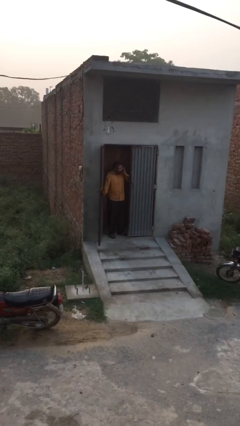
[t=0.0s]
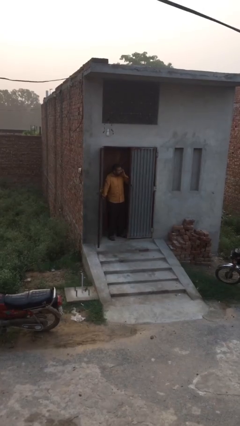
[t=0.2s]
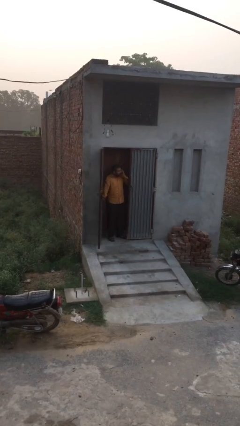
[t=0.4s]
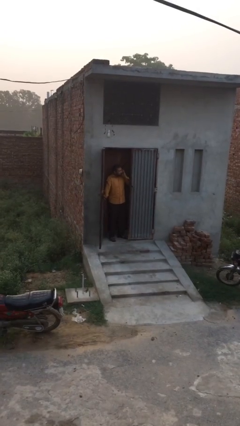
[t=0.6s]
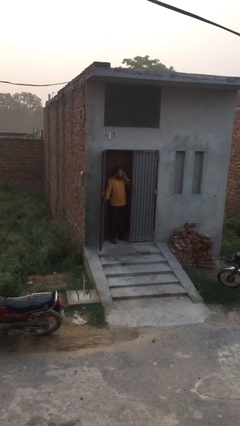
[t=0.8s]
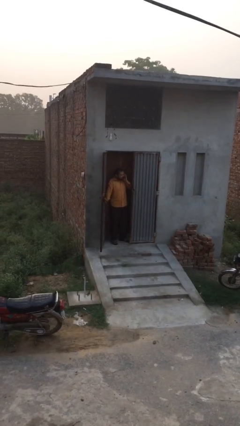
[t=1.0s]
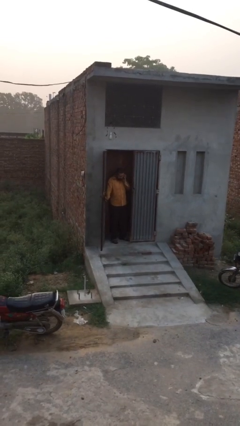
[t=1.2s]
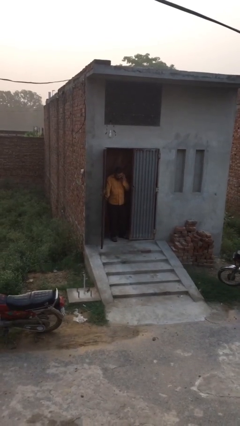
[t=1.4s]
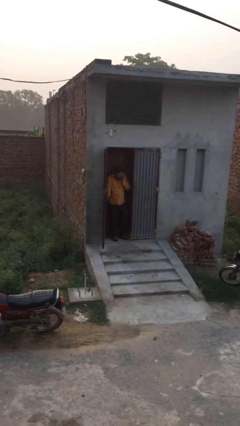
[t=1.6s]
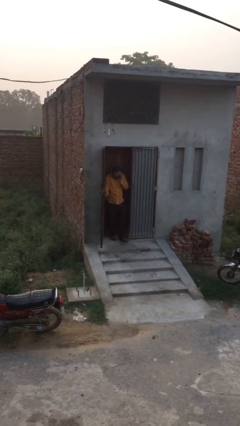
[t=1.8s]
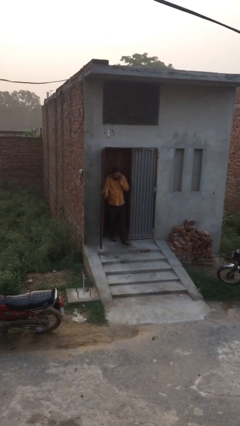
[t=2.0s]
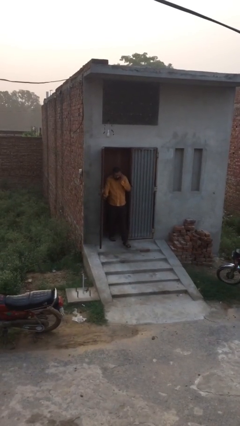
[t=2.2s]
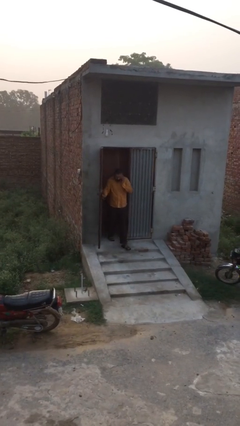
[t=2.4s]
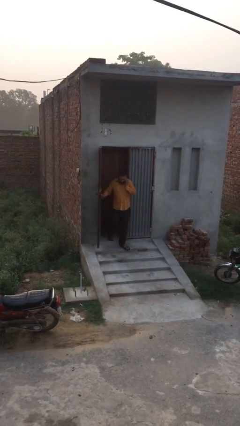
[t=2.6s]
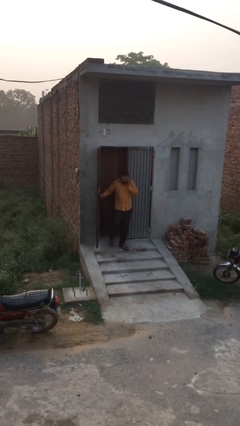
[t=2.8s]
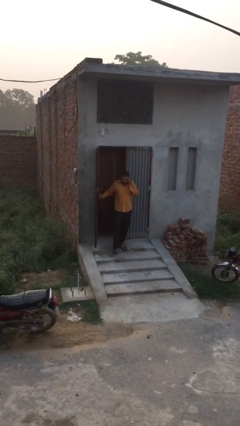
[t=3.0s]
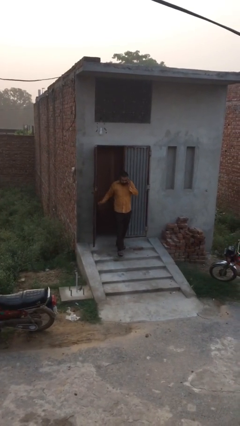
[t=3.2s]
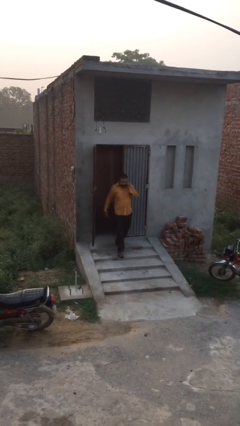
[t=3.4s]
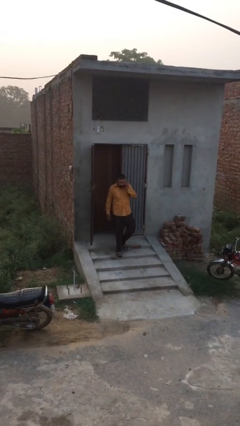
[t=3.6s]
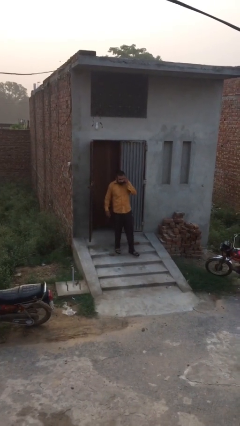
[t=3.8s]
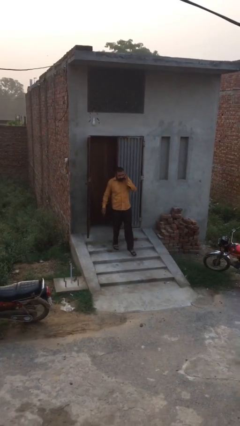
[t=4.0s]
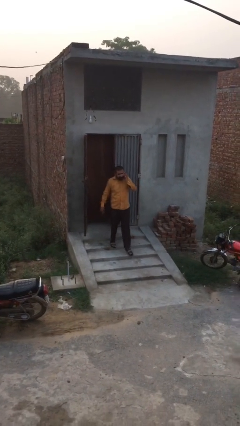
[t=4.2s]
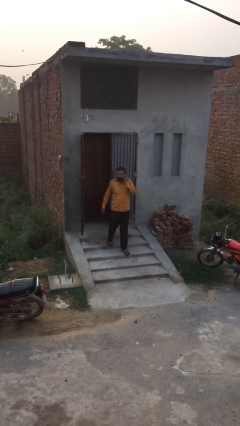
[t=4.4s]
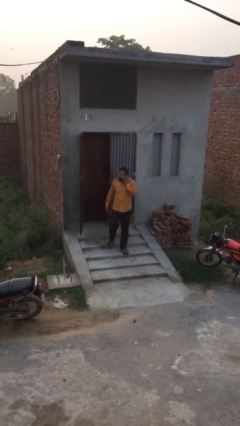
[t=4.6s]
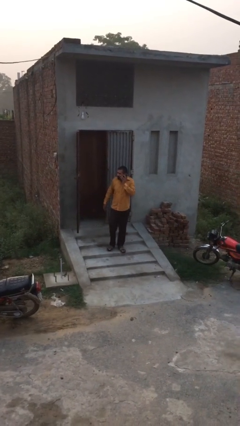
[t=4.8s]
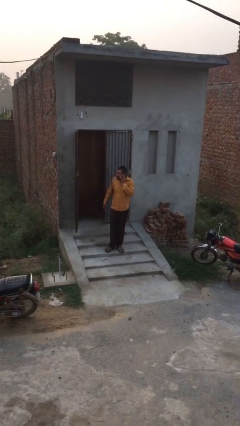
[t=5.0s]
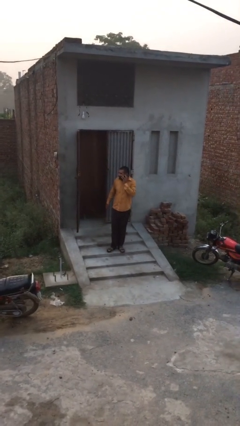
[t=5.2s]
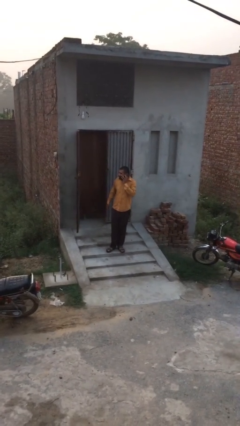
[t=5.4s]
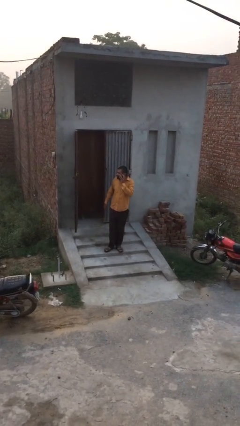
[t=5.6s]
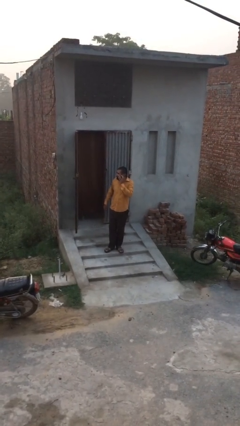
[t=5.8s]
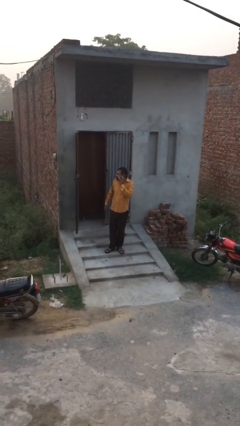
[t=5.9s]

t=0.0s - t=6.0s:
person enters scene through structure

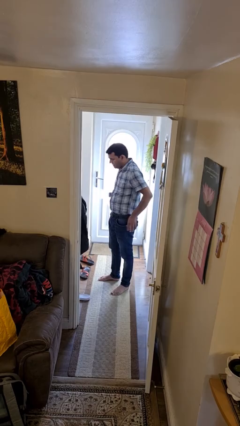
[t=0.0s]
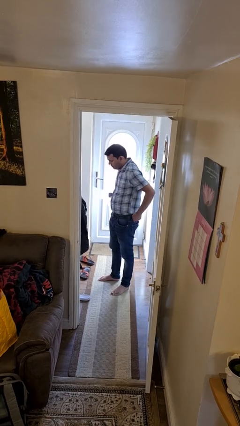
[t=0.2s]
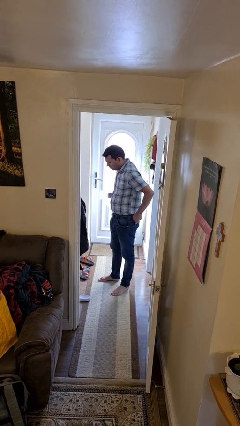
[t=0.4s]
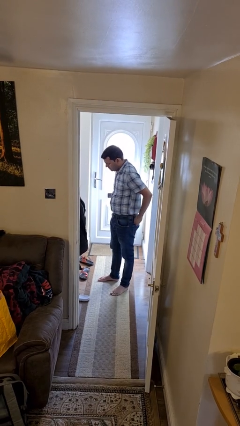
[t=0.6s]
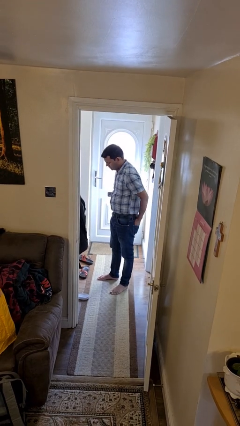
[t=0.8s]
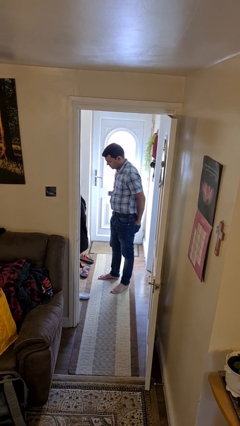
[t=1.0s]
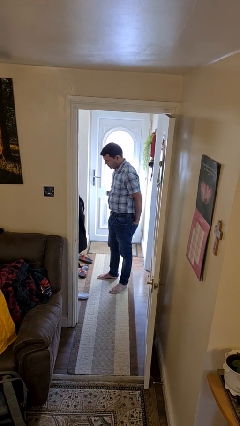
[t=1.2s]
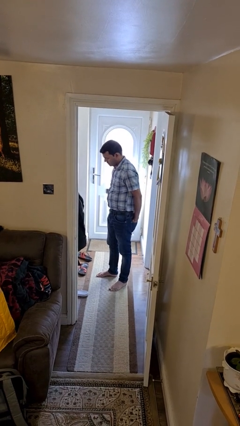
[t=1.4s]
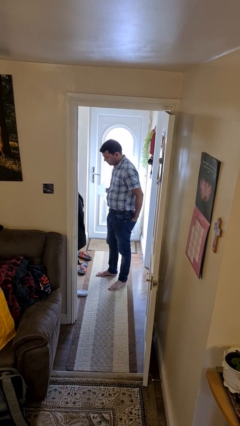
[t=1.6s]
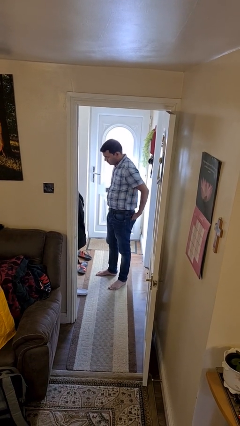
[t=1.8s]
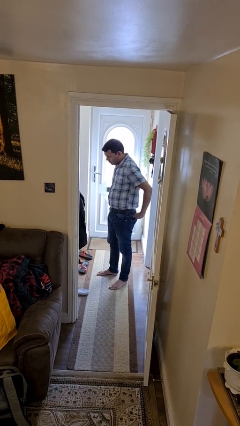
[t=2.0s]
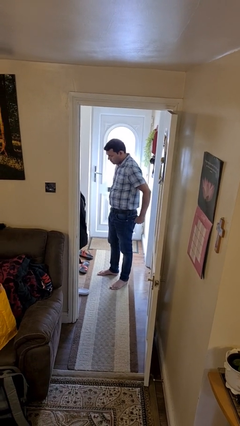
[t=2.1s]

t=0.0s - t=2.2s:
person puts hands in back pockets
